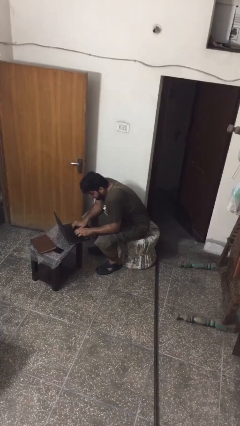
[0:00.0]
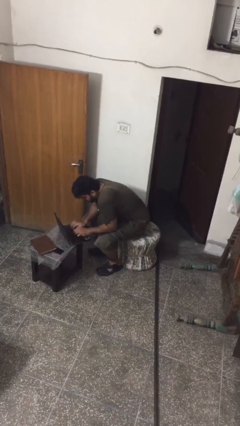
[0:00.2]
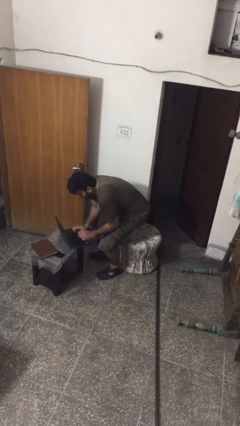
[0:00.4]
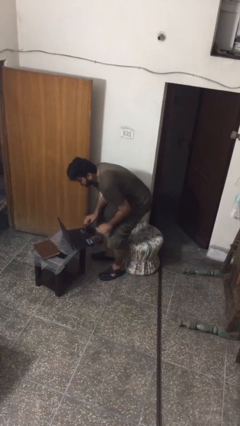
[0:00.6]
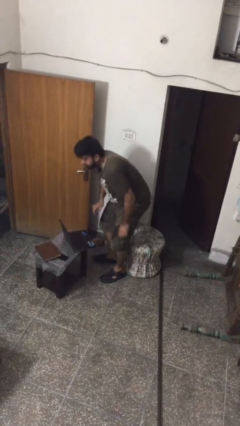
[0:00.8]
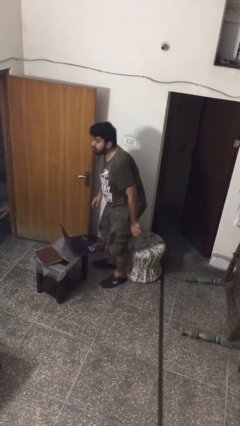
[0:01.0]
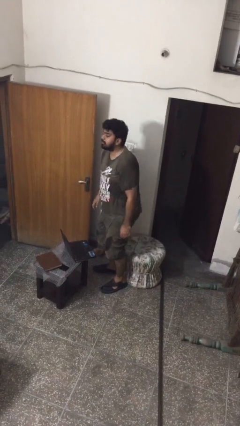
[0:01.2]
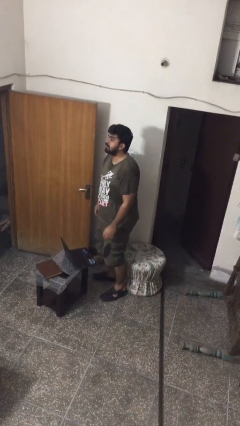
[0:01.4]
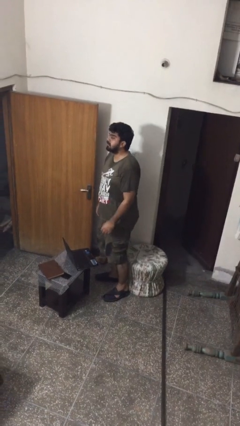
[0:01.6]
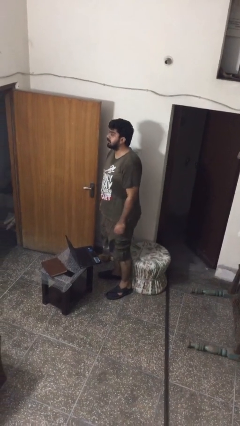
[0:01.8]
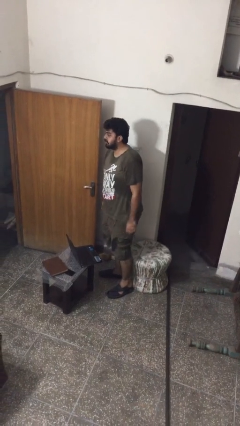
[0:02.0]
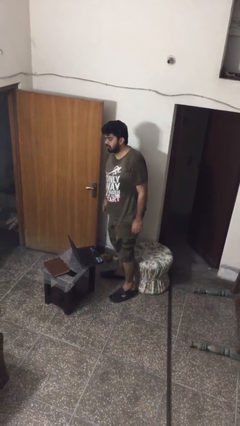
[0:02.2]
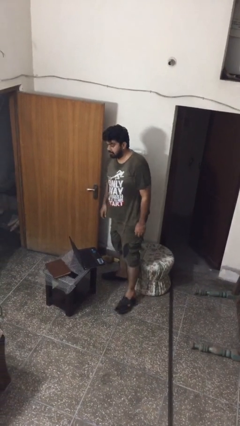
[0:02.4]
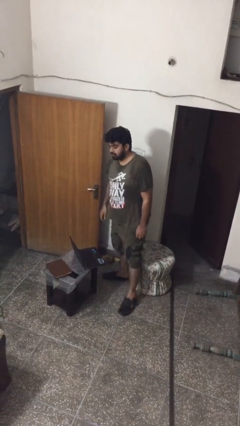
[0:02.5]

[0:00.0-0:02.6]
person stands up

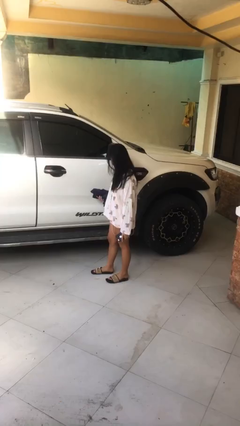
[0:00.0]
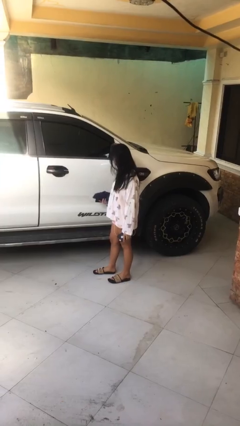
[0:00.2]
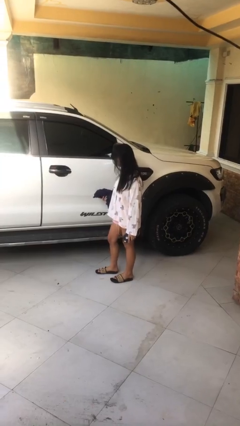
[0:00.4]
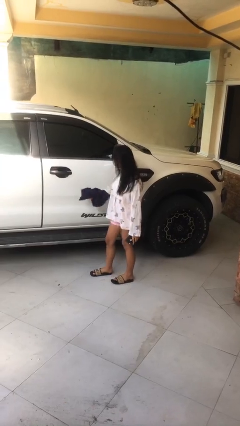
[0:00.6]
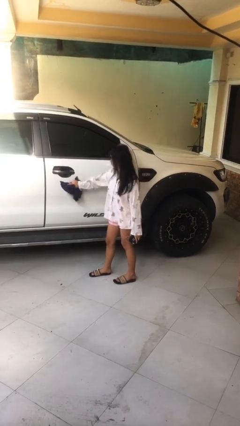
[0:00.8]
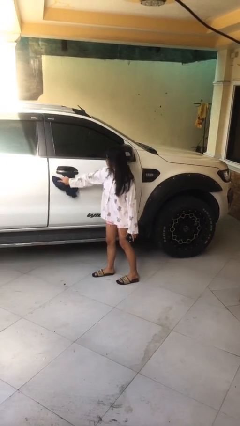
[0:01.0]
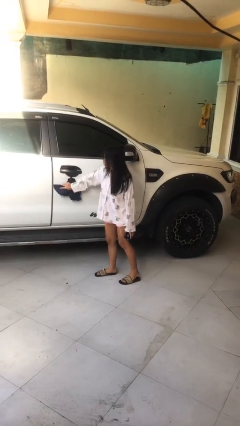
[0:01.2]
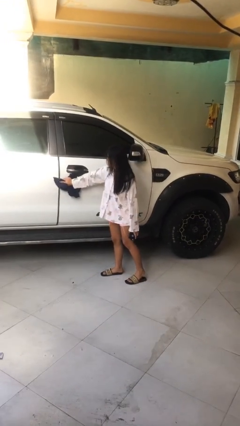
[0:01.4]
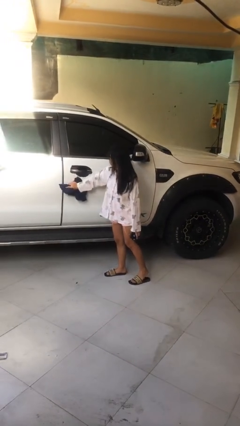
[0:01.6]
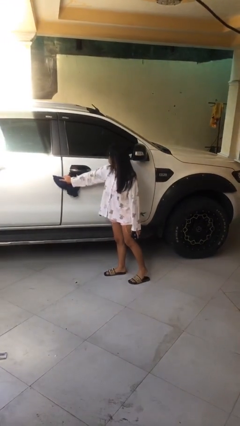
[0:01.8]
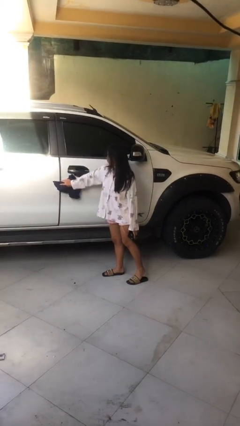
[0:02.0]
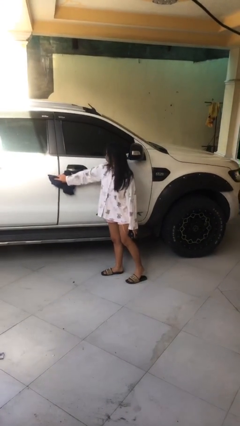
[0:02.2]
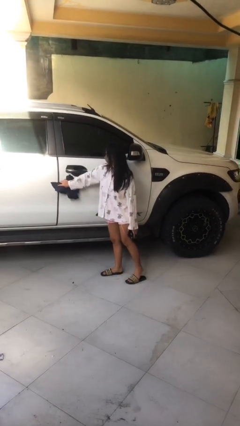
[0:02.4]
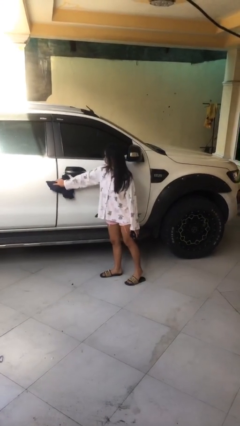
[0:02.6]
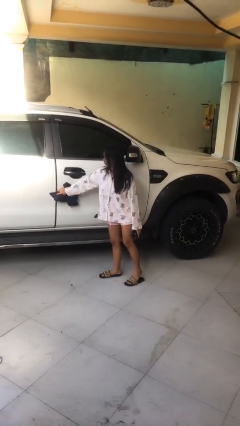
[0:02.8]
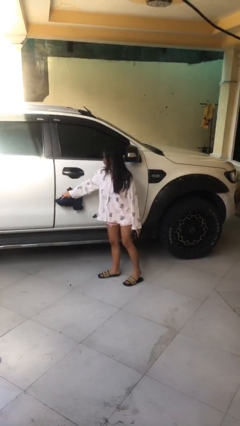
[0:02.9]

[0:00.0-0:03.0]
person polishes car with rag

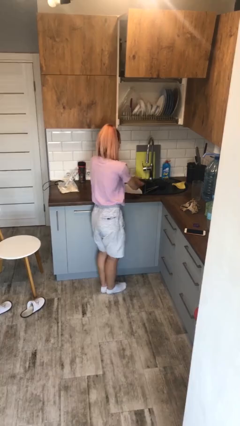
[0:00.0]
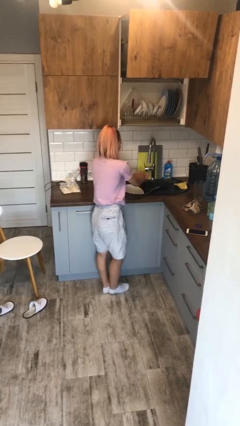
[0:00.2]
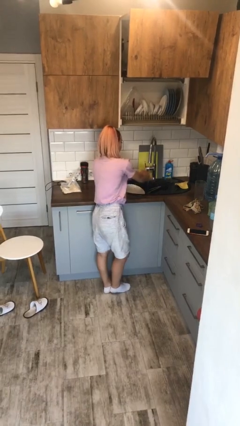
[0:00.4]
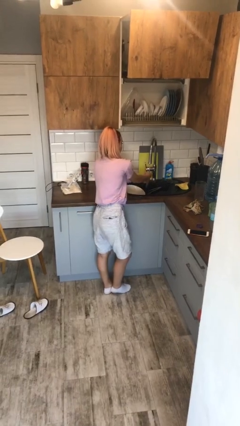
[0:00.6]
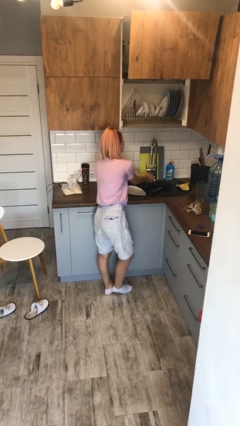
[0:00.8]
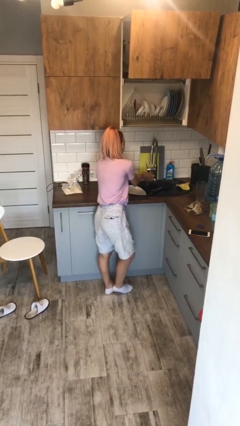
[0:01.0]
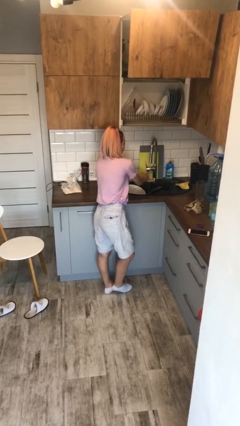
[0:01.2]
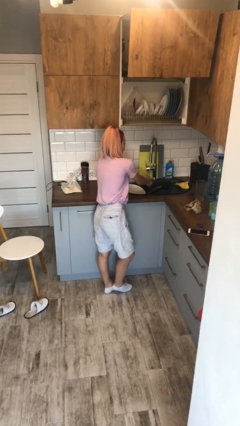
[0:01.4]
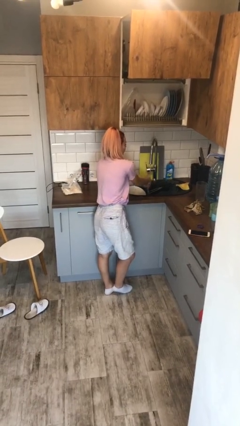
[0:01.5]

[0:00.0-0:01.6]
person washes hands

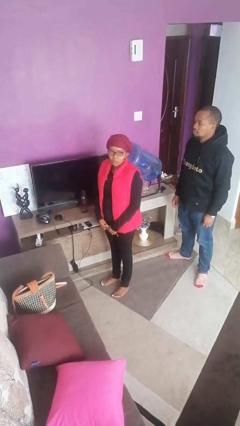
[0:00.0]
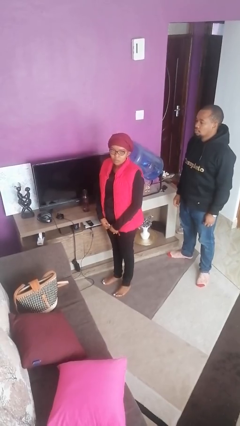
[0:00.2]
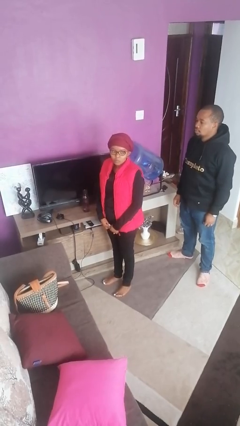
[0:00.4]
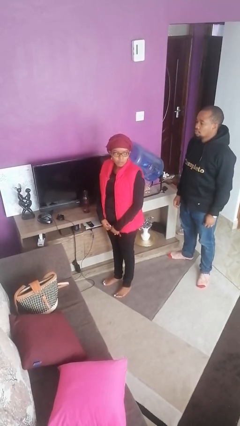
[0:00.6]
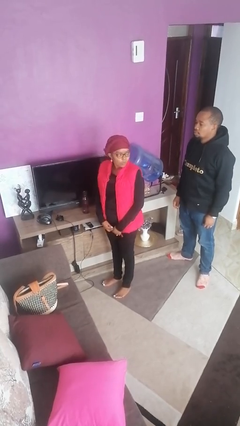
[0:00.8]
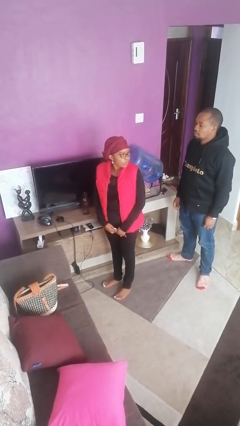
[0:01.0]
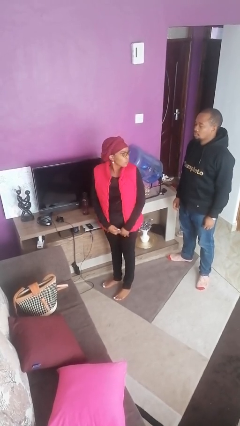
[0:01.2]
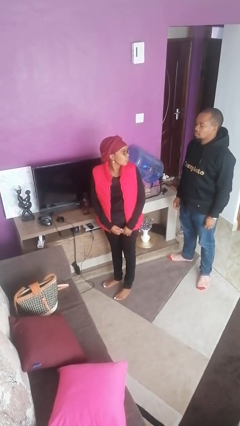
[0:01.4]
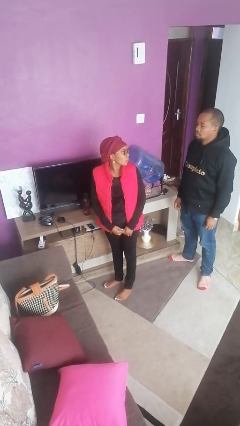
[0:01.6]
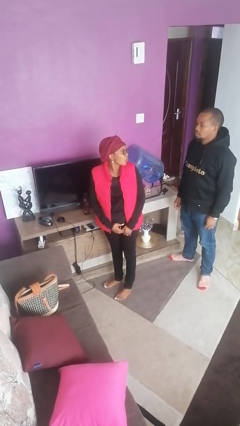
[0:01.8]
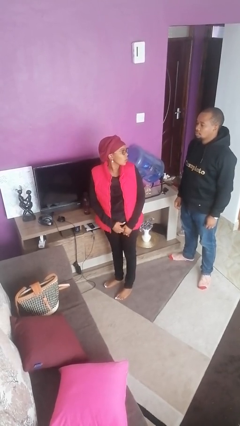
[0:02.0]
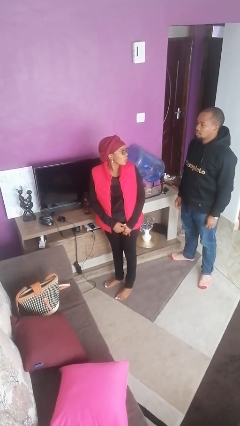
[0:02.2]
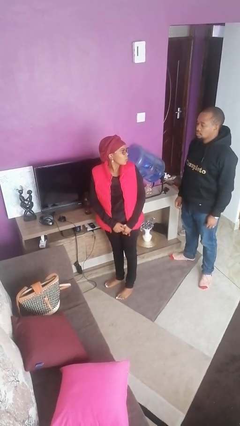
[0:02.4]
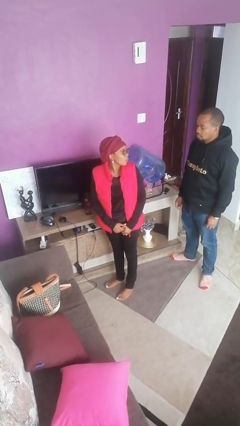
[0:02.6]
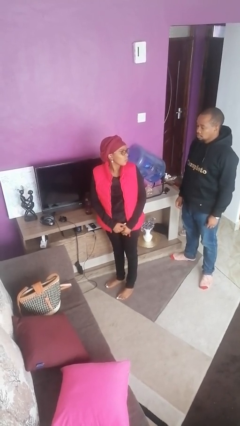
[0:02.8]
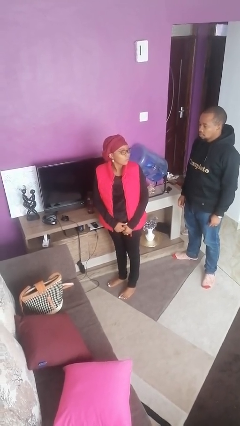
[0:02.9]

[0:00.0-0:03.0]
person looks over shoulder

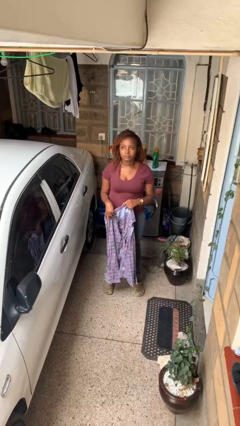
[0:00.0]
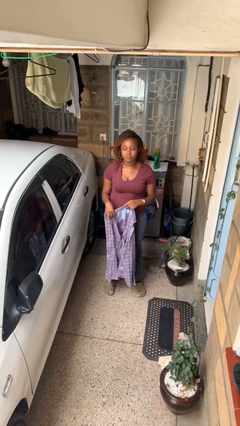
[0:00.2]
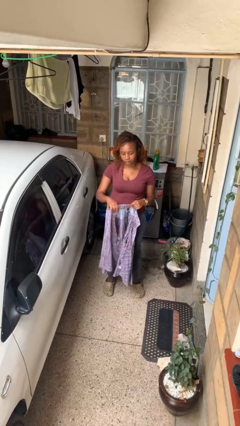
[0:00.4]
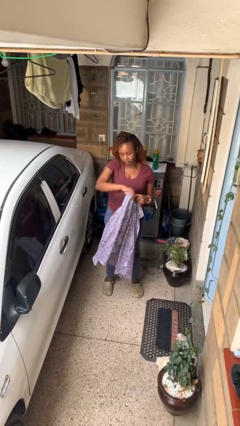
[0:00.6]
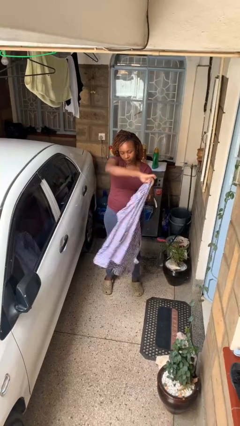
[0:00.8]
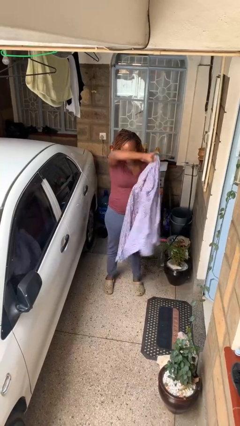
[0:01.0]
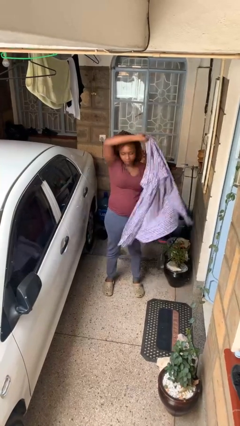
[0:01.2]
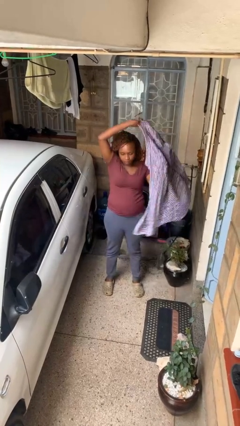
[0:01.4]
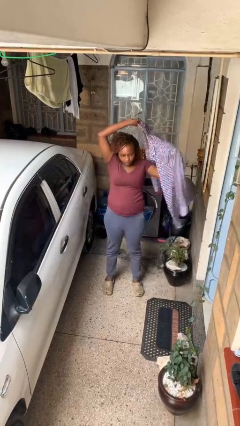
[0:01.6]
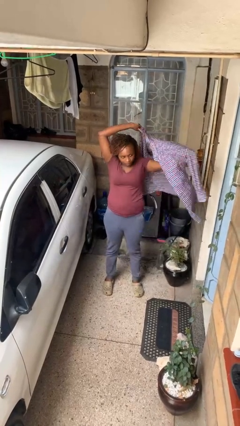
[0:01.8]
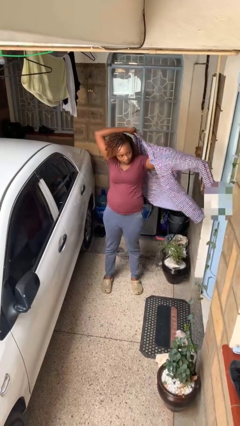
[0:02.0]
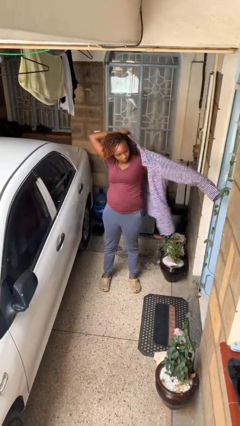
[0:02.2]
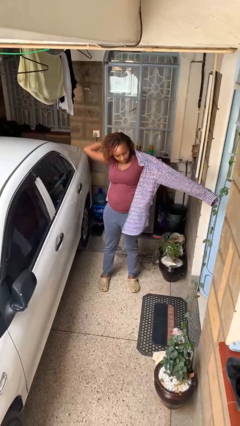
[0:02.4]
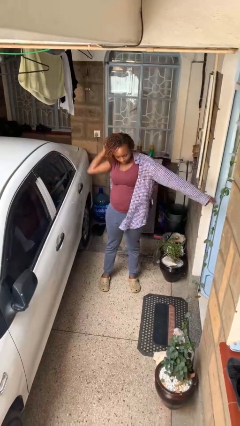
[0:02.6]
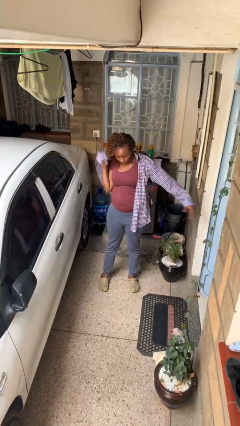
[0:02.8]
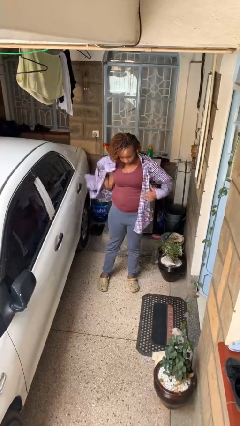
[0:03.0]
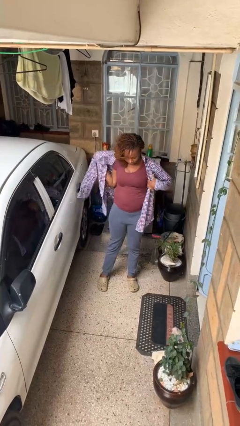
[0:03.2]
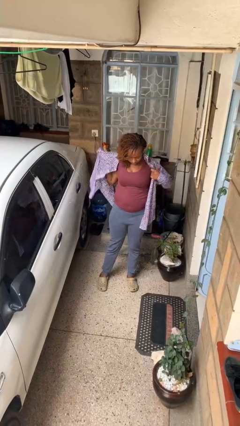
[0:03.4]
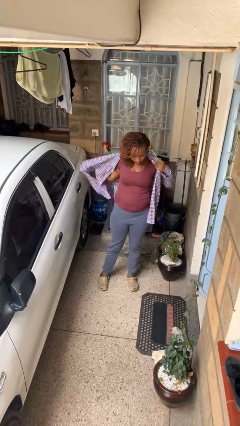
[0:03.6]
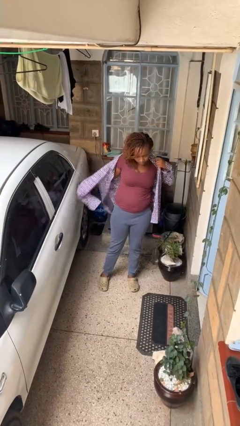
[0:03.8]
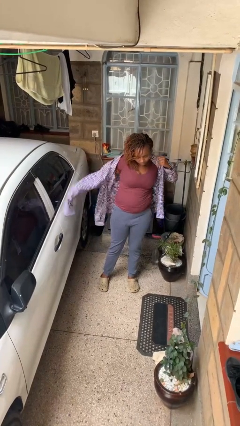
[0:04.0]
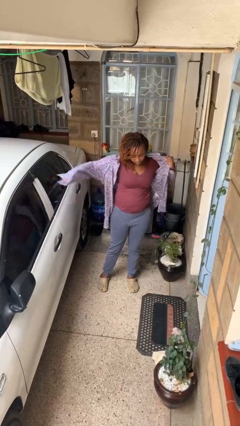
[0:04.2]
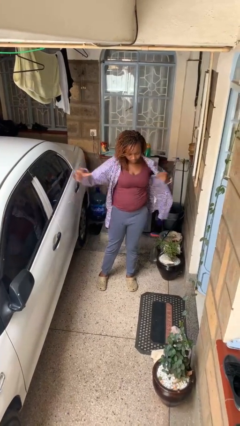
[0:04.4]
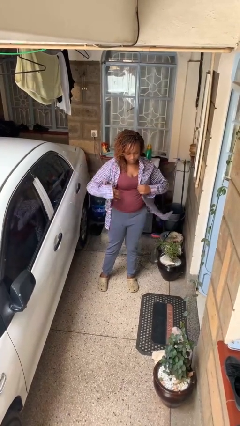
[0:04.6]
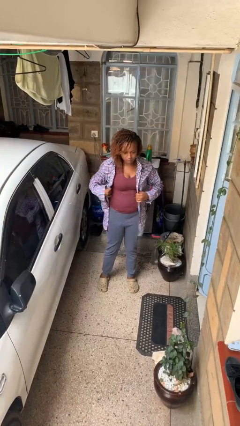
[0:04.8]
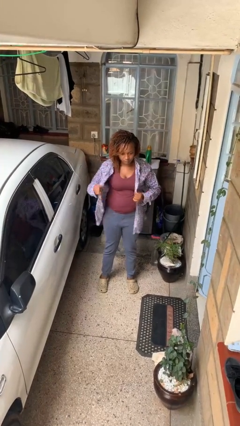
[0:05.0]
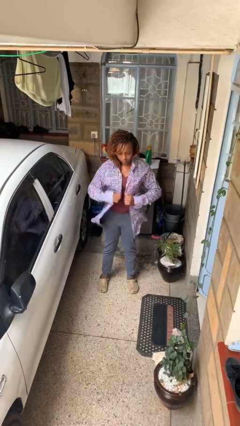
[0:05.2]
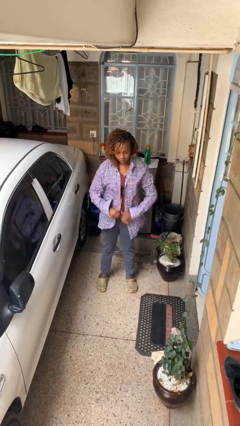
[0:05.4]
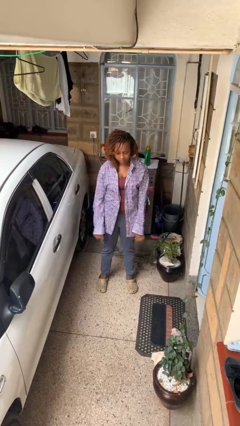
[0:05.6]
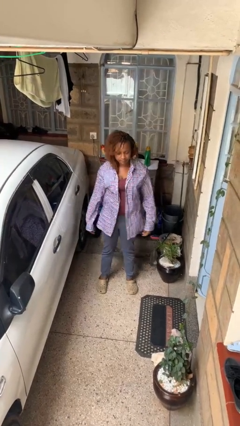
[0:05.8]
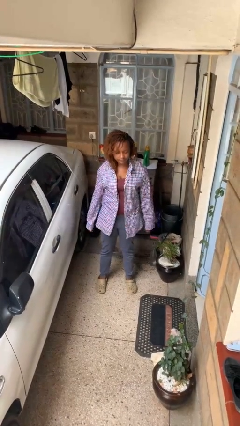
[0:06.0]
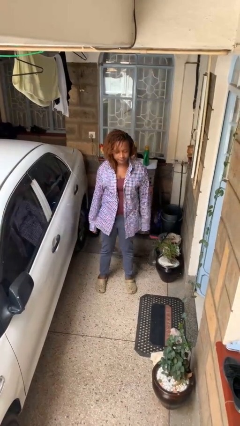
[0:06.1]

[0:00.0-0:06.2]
person puts on shirt

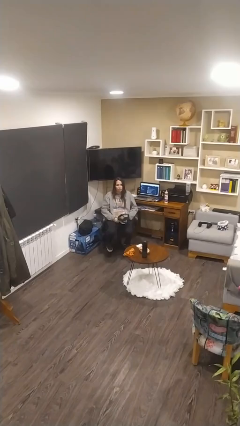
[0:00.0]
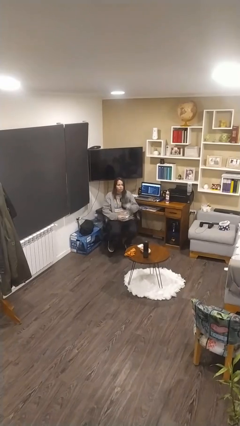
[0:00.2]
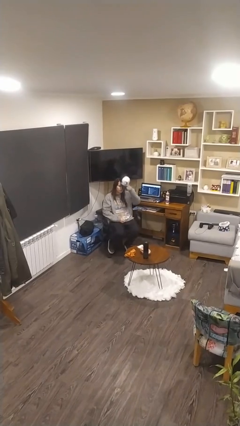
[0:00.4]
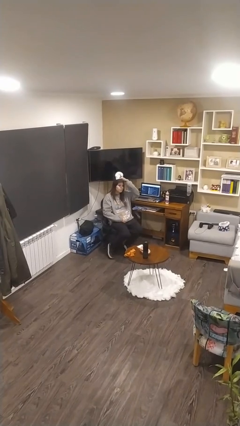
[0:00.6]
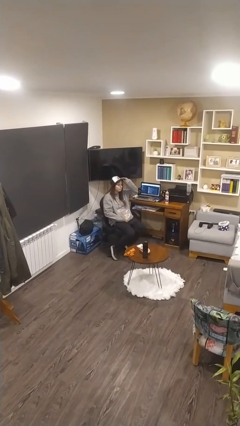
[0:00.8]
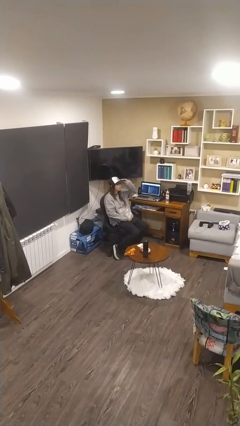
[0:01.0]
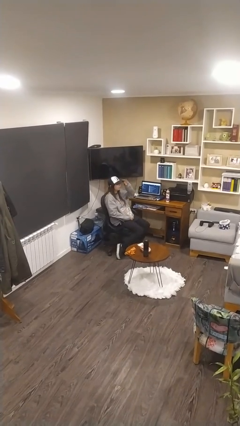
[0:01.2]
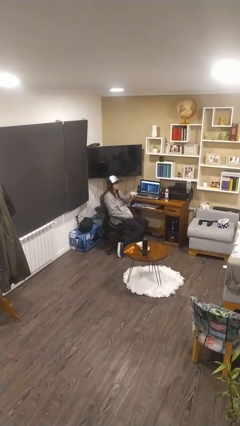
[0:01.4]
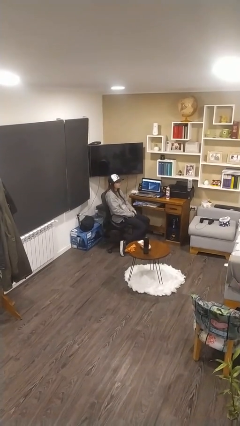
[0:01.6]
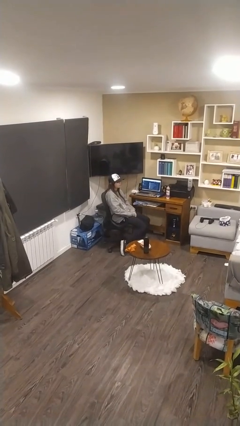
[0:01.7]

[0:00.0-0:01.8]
person puts on hat
